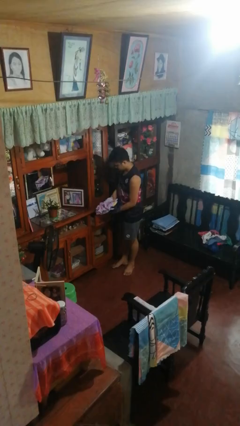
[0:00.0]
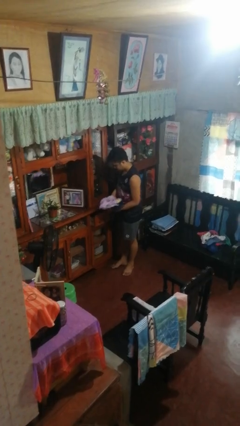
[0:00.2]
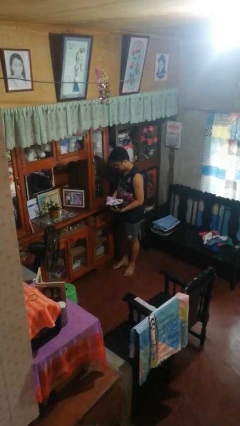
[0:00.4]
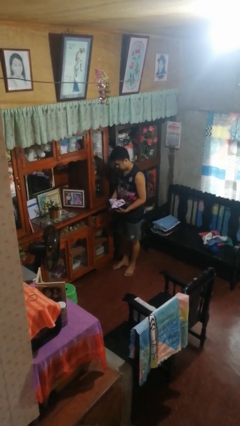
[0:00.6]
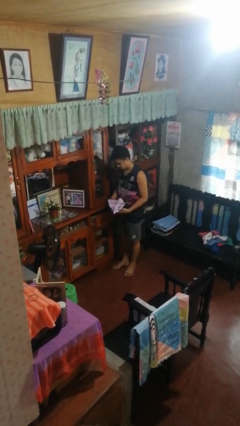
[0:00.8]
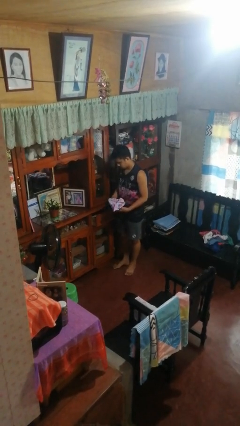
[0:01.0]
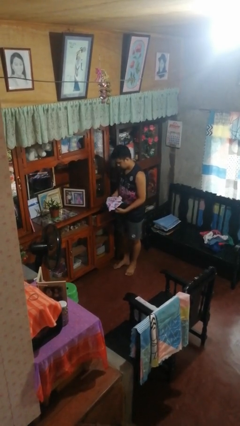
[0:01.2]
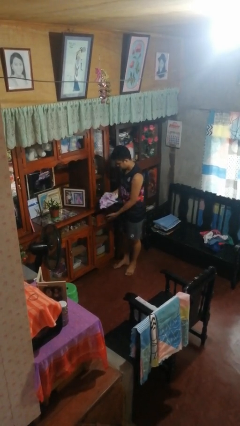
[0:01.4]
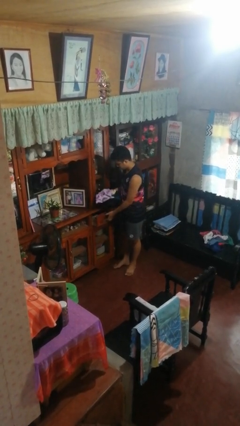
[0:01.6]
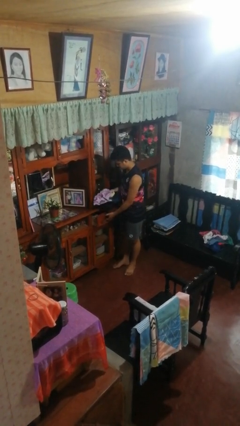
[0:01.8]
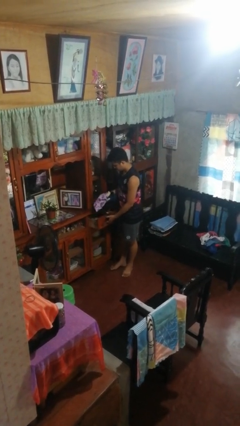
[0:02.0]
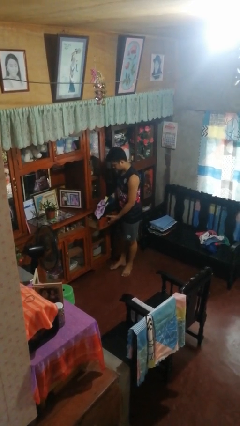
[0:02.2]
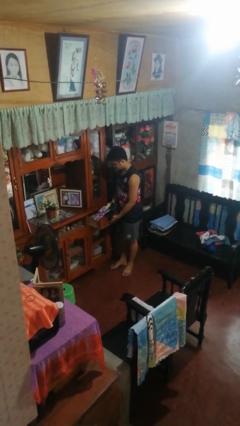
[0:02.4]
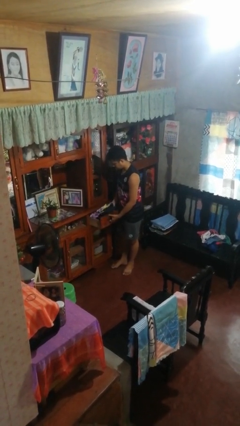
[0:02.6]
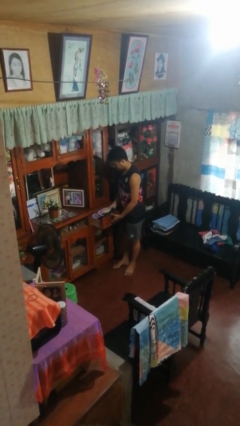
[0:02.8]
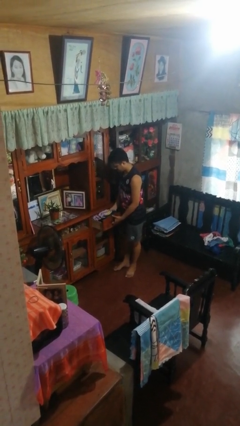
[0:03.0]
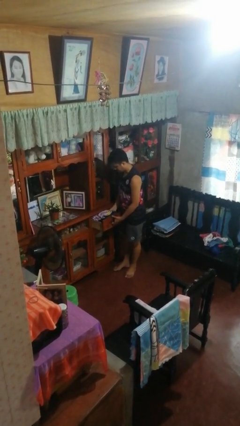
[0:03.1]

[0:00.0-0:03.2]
person puts clothes into dresser

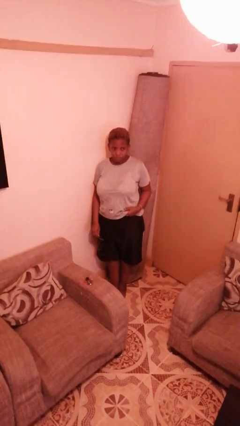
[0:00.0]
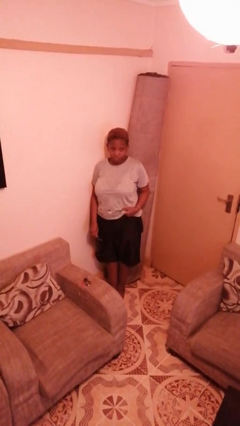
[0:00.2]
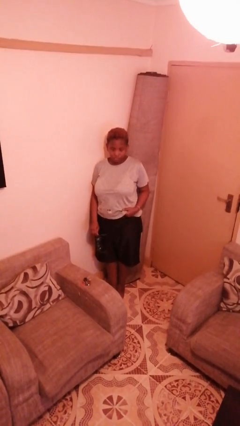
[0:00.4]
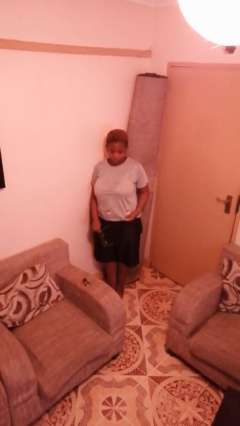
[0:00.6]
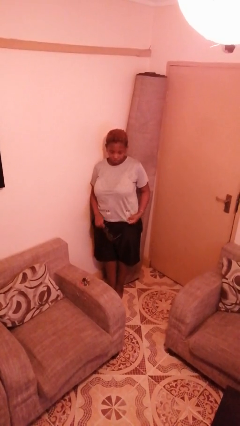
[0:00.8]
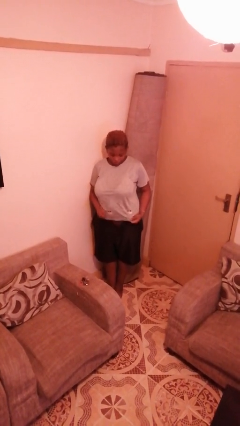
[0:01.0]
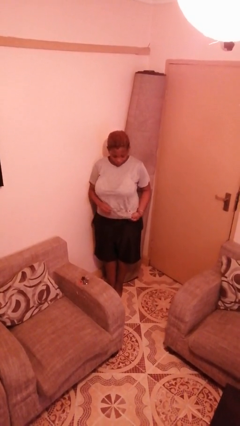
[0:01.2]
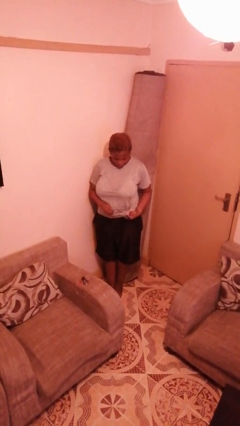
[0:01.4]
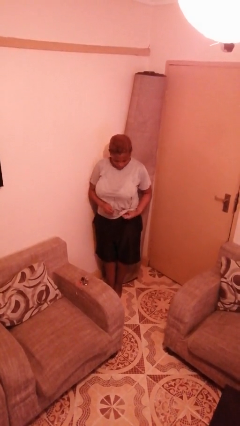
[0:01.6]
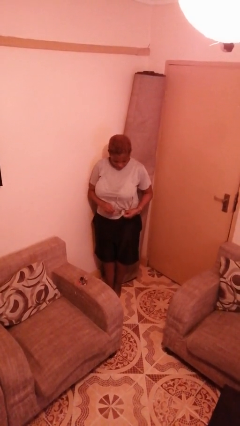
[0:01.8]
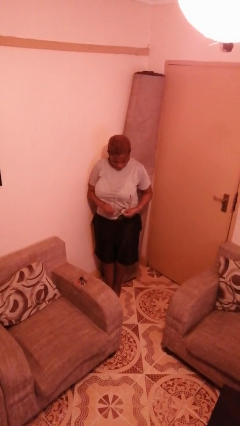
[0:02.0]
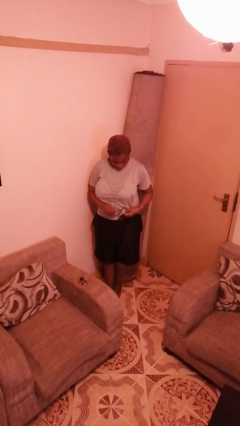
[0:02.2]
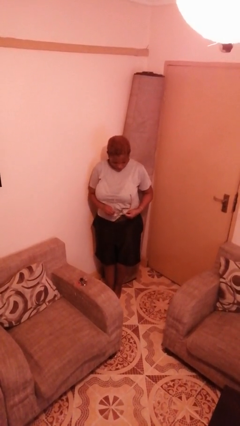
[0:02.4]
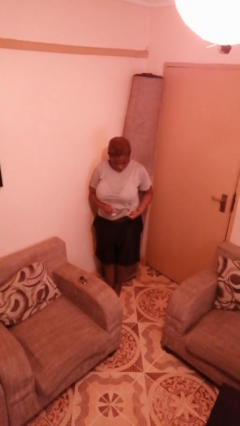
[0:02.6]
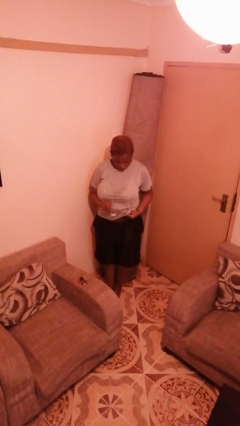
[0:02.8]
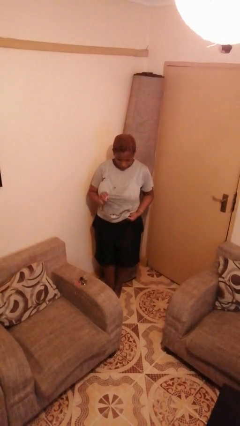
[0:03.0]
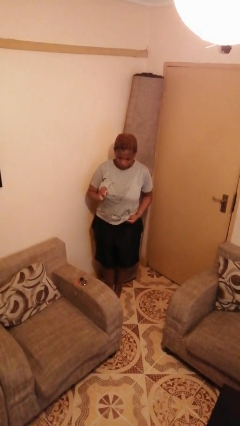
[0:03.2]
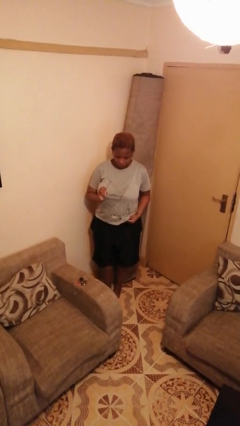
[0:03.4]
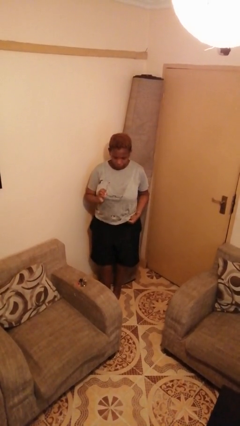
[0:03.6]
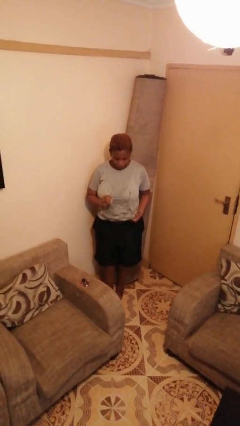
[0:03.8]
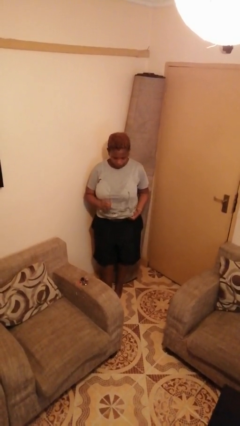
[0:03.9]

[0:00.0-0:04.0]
person cleans eyeglasses

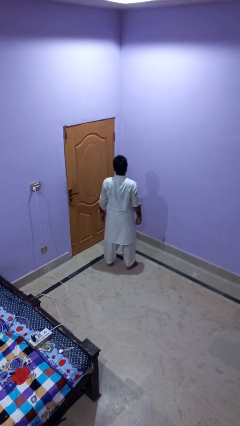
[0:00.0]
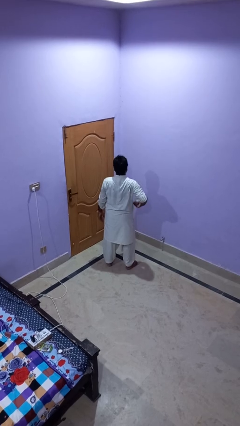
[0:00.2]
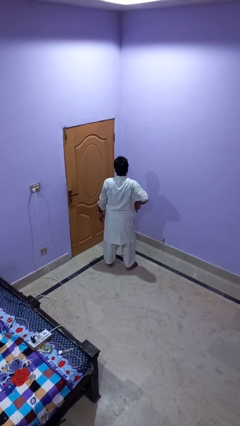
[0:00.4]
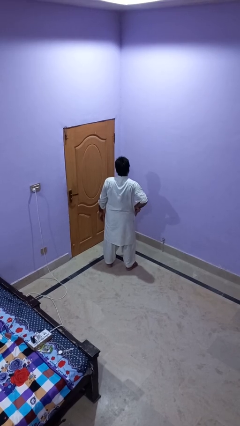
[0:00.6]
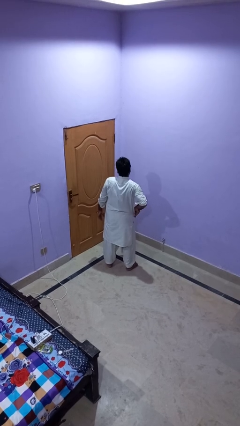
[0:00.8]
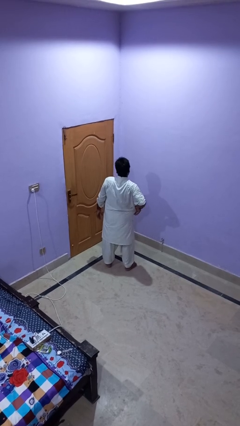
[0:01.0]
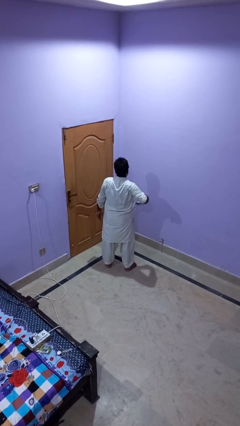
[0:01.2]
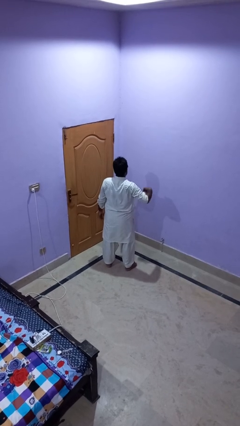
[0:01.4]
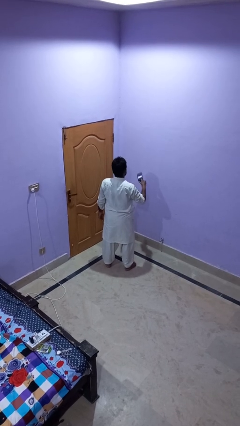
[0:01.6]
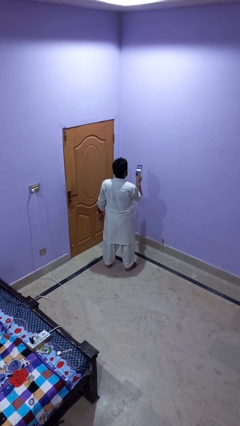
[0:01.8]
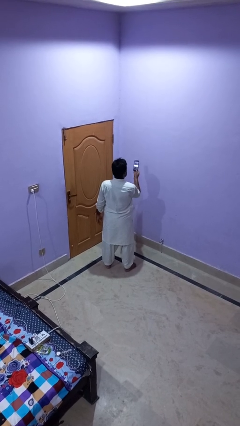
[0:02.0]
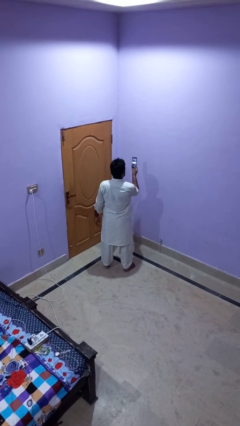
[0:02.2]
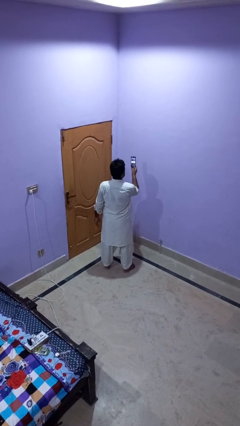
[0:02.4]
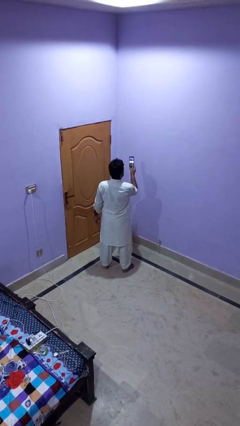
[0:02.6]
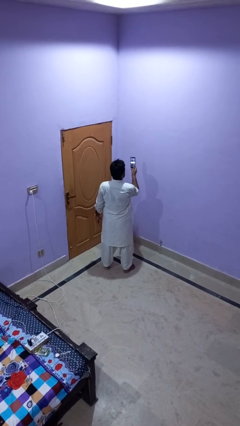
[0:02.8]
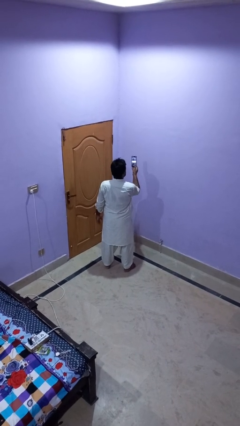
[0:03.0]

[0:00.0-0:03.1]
person takes phone from pocket

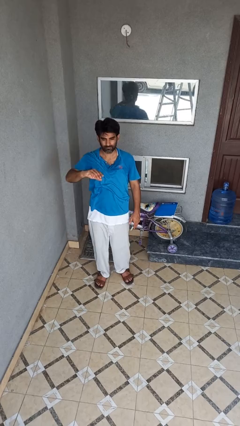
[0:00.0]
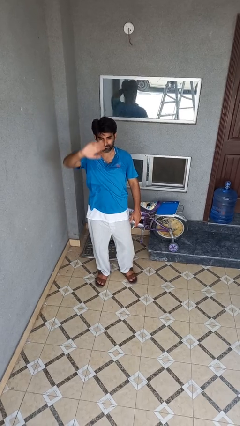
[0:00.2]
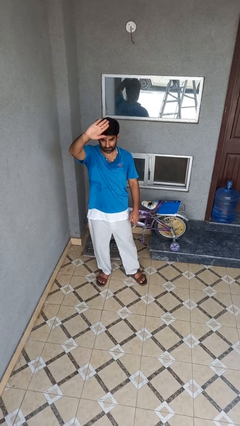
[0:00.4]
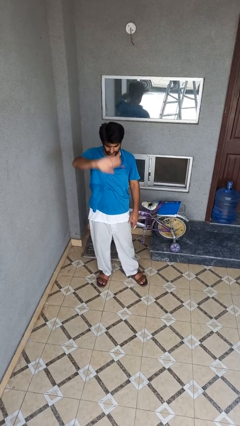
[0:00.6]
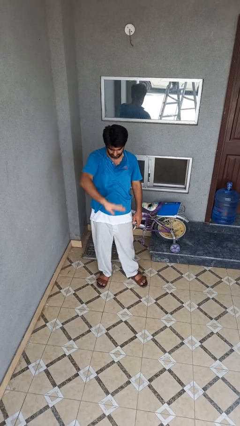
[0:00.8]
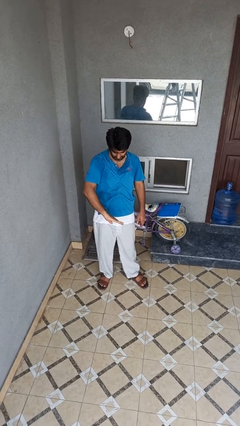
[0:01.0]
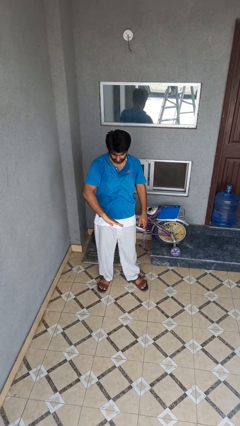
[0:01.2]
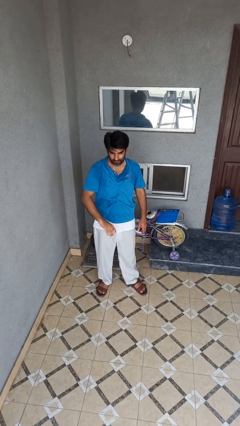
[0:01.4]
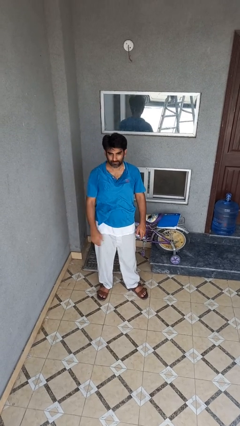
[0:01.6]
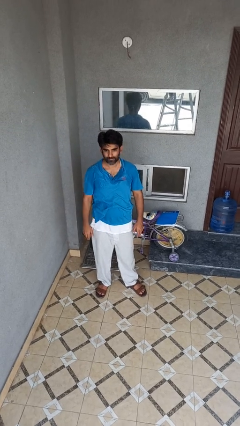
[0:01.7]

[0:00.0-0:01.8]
person gestures swipe down

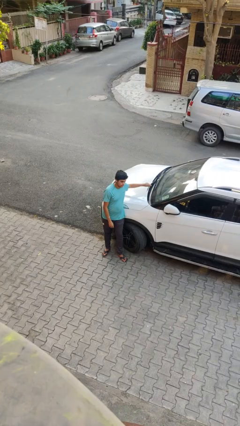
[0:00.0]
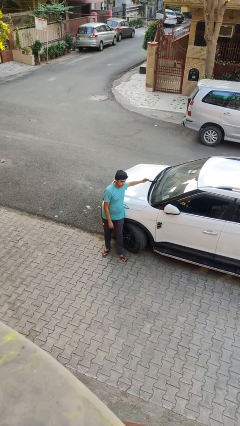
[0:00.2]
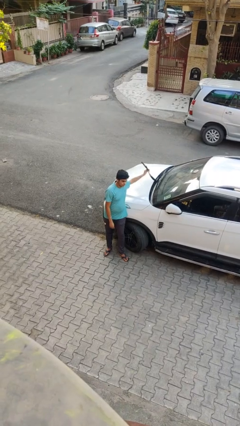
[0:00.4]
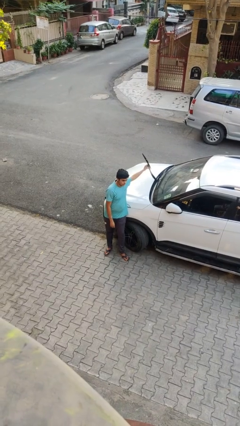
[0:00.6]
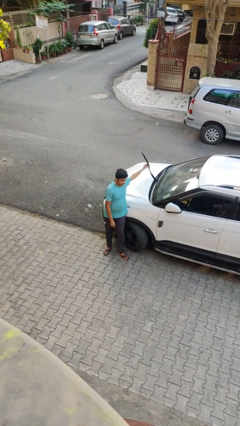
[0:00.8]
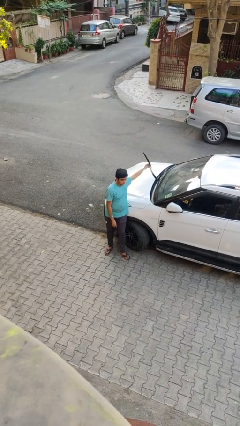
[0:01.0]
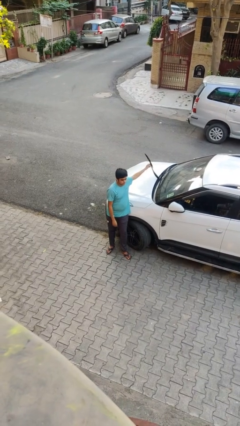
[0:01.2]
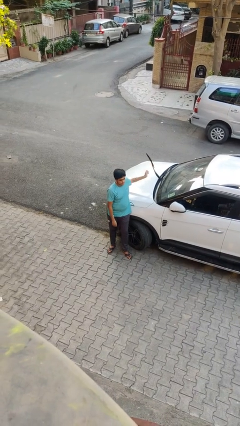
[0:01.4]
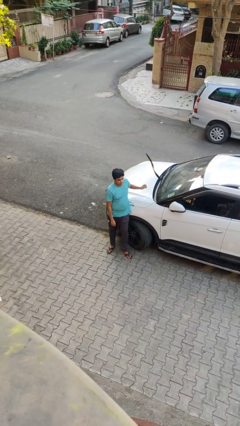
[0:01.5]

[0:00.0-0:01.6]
person flips up car wipers

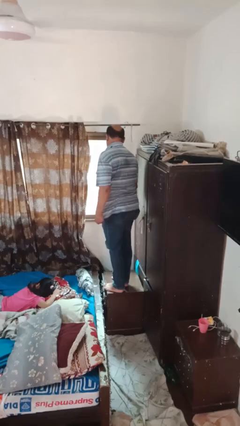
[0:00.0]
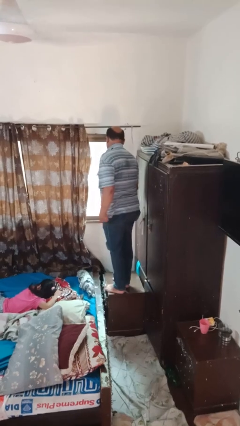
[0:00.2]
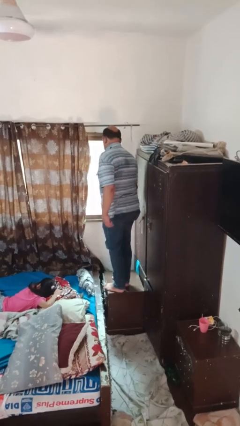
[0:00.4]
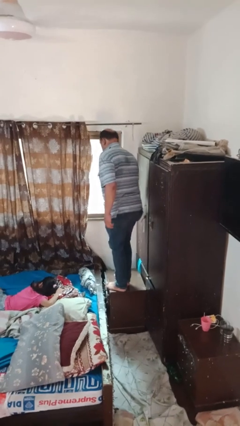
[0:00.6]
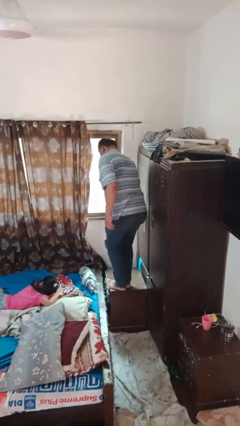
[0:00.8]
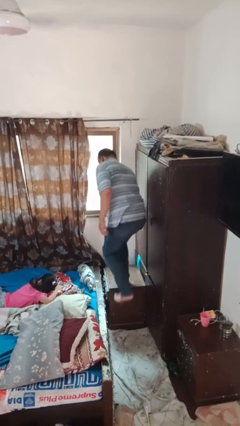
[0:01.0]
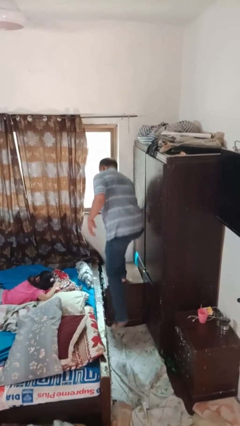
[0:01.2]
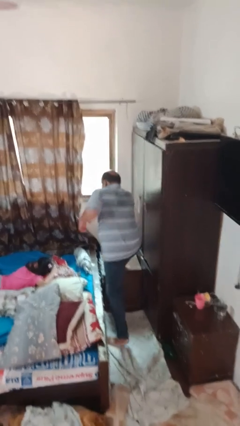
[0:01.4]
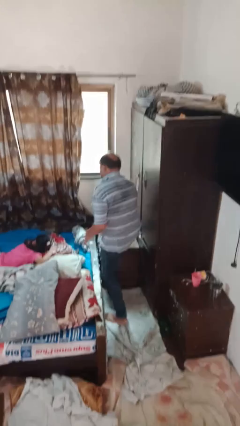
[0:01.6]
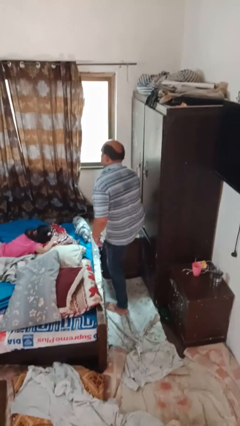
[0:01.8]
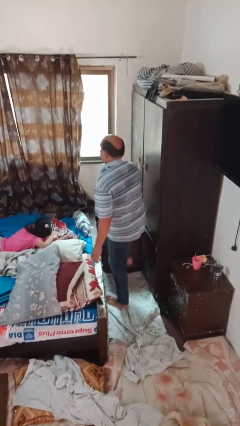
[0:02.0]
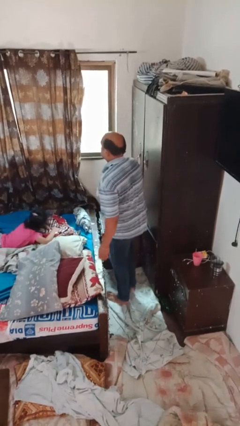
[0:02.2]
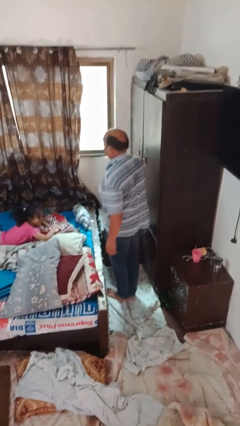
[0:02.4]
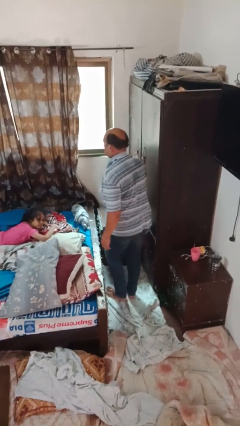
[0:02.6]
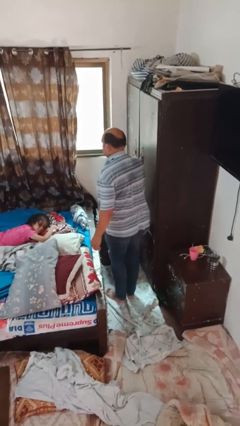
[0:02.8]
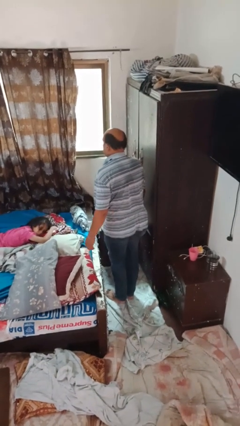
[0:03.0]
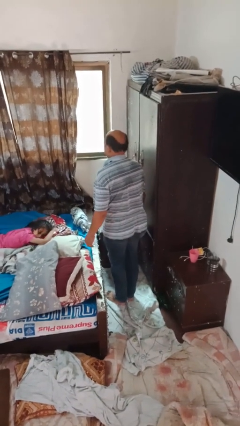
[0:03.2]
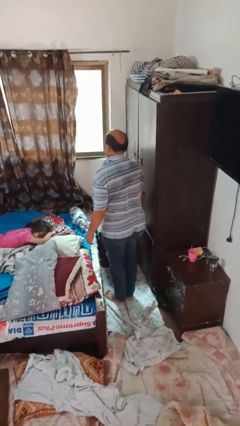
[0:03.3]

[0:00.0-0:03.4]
person climbs off table

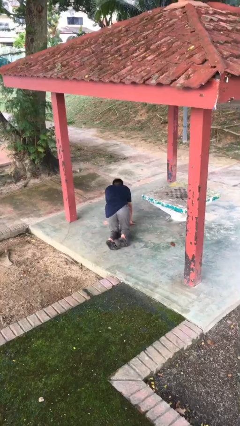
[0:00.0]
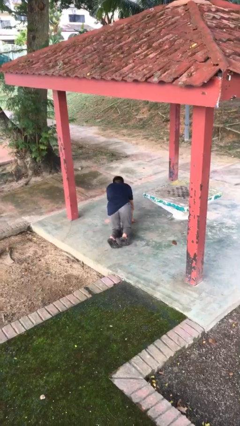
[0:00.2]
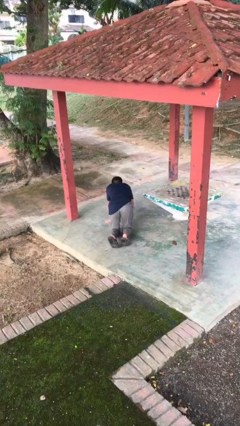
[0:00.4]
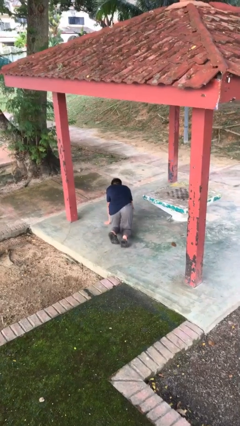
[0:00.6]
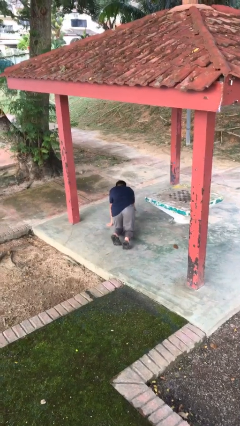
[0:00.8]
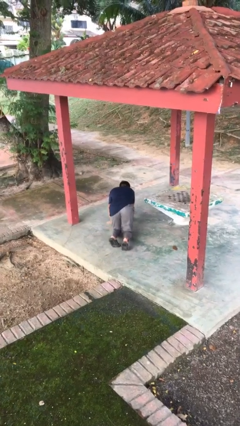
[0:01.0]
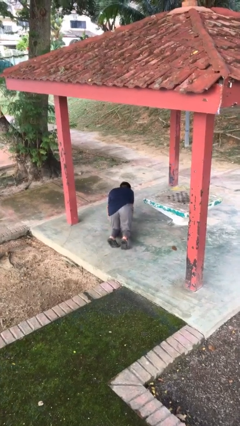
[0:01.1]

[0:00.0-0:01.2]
person crawls
